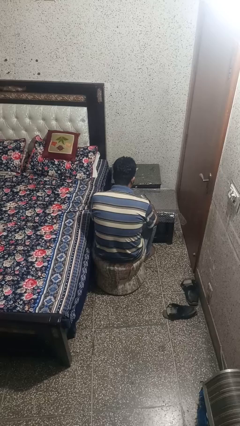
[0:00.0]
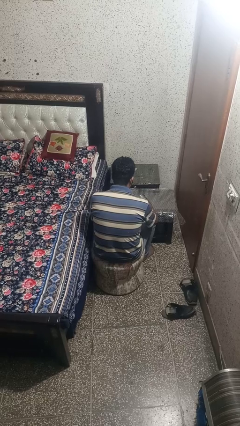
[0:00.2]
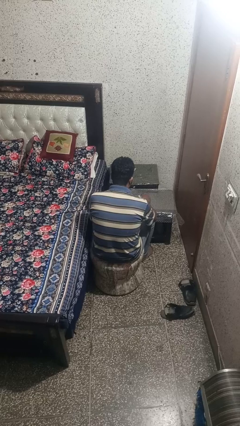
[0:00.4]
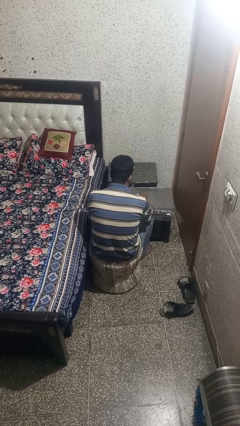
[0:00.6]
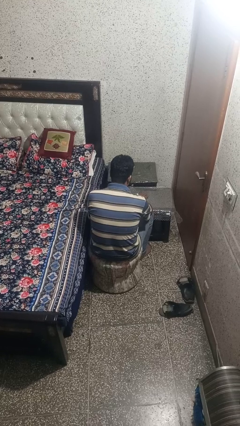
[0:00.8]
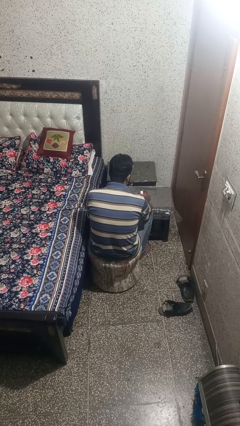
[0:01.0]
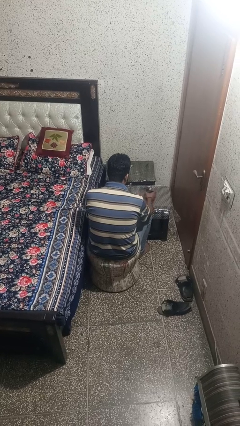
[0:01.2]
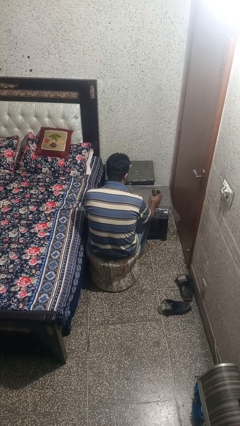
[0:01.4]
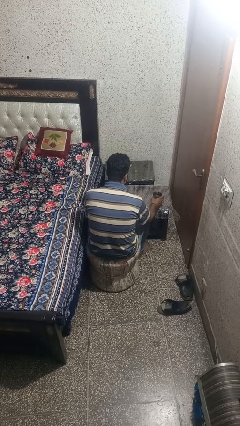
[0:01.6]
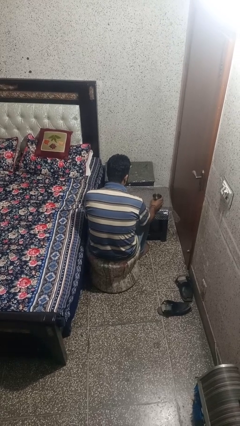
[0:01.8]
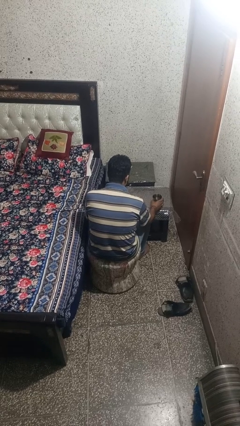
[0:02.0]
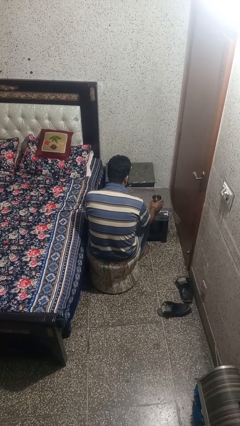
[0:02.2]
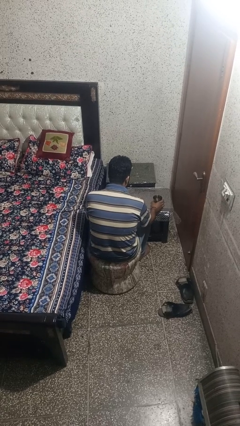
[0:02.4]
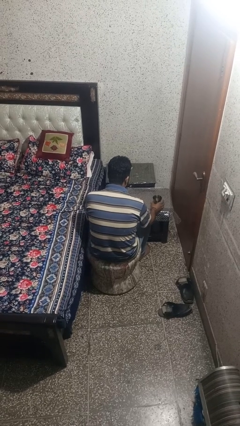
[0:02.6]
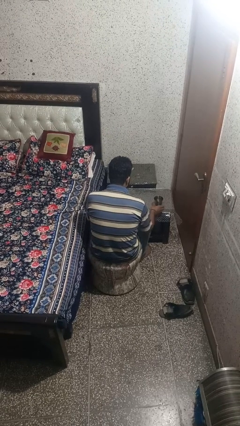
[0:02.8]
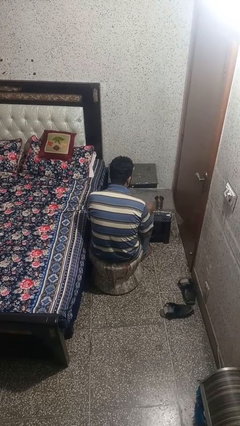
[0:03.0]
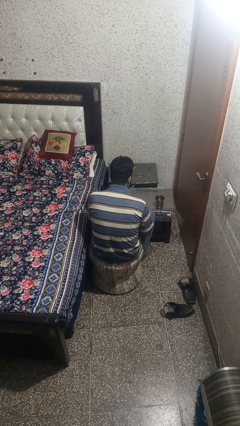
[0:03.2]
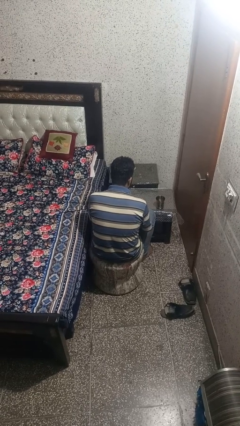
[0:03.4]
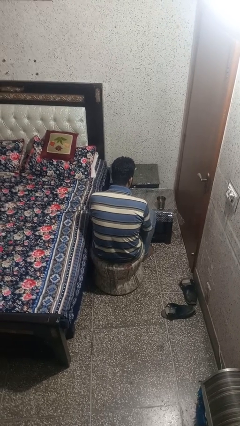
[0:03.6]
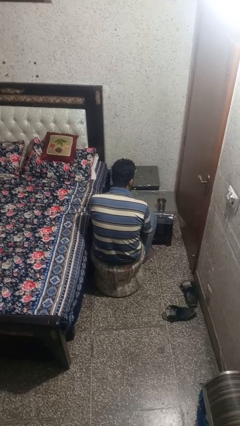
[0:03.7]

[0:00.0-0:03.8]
person sets upright glass

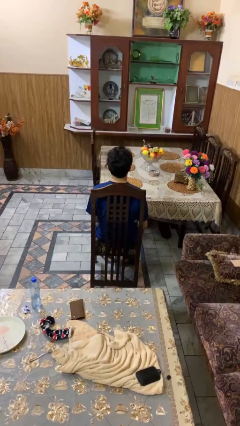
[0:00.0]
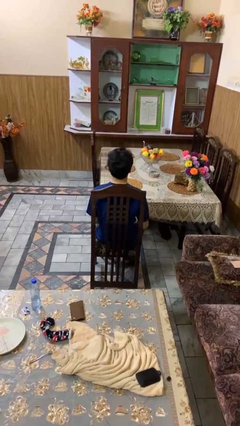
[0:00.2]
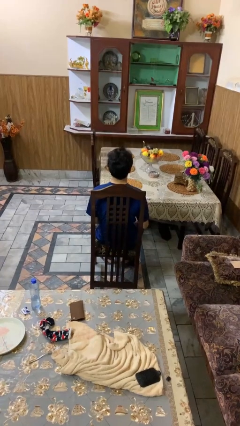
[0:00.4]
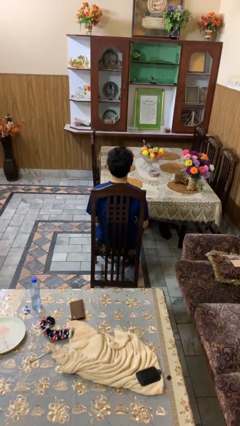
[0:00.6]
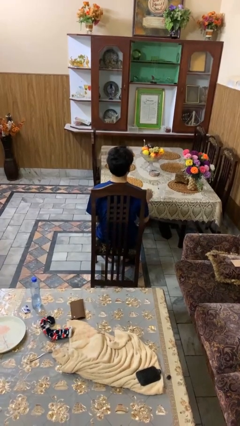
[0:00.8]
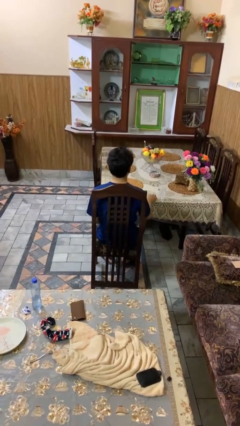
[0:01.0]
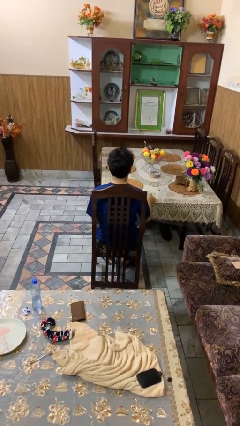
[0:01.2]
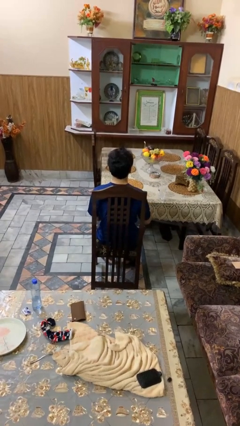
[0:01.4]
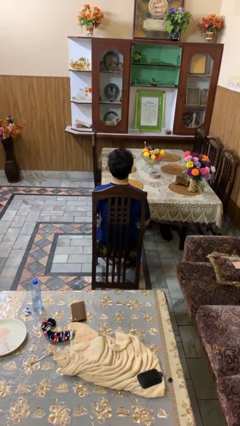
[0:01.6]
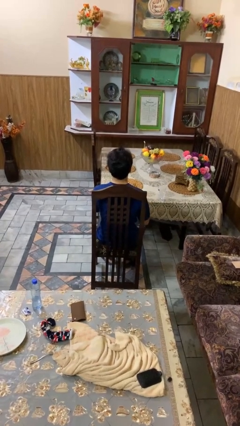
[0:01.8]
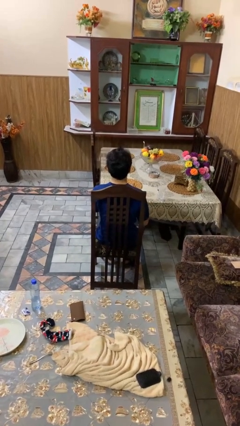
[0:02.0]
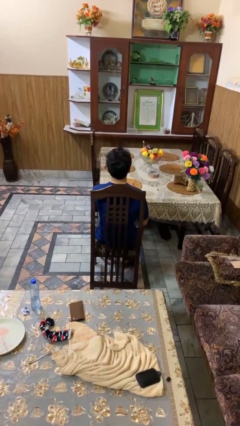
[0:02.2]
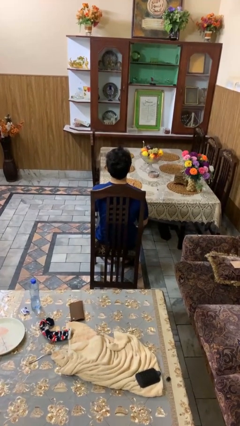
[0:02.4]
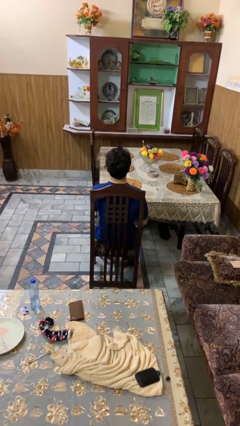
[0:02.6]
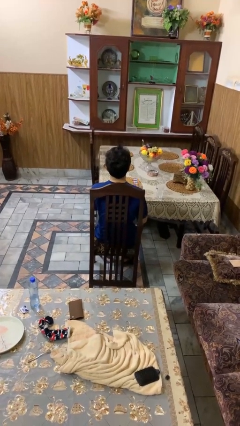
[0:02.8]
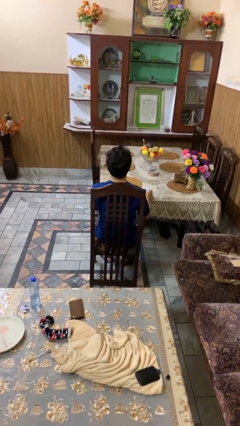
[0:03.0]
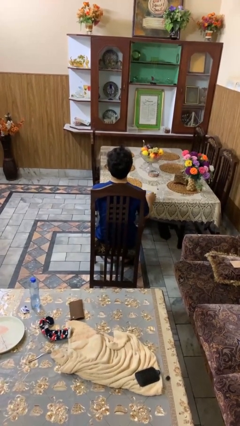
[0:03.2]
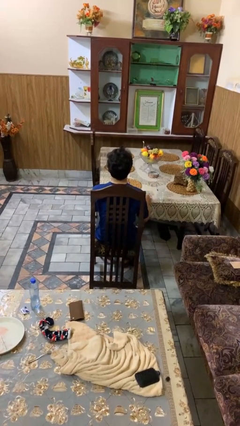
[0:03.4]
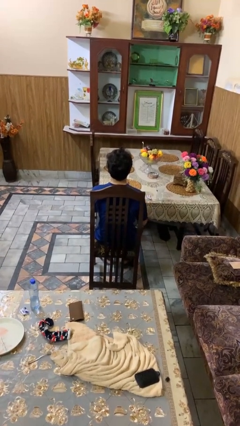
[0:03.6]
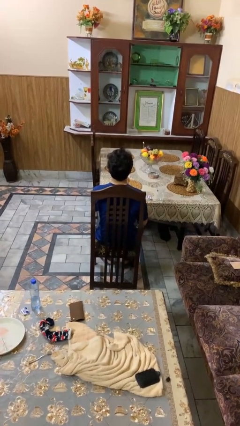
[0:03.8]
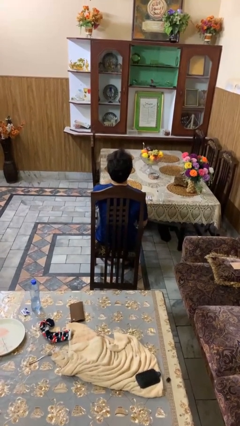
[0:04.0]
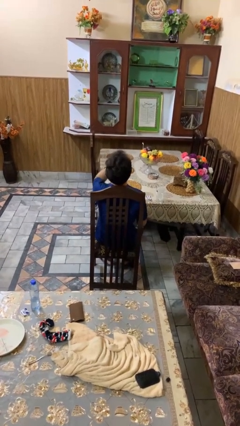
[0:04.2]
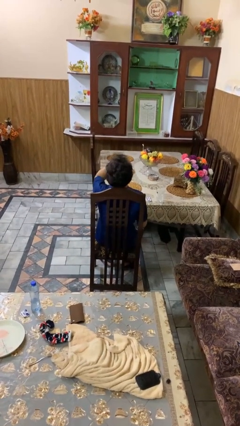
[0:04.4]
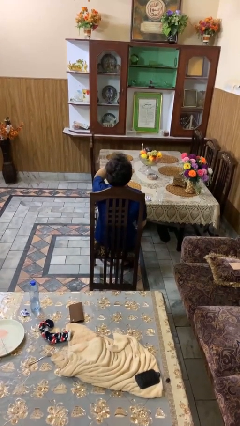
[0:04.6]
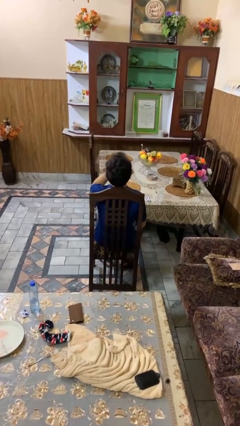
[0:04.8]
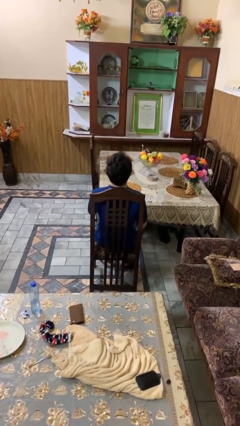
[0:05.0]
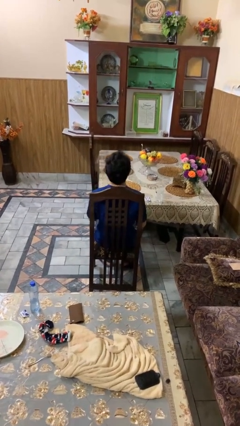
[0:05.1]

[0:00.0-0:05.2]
person takes medicine pills

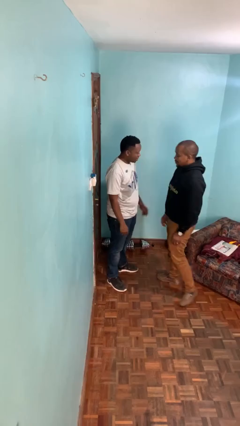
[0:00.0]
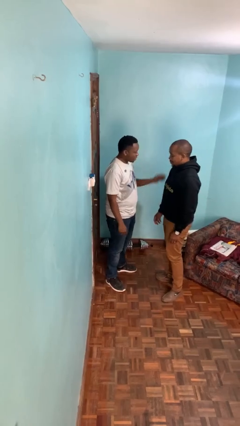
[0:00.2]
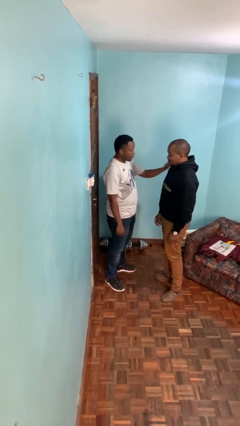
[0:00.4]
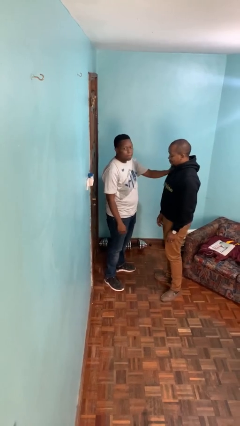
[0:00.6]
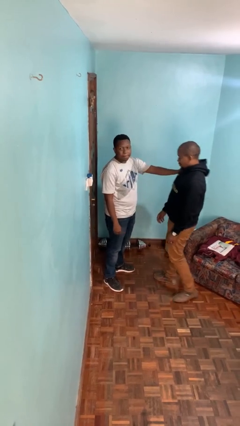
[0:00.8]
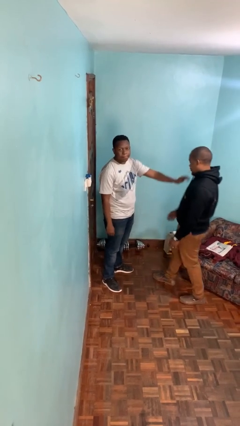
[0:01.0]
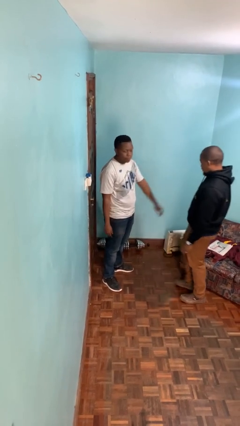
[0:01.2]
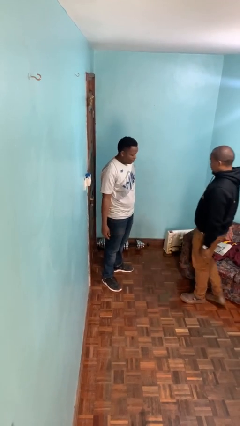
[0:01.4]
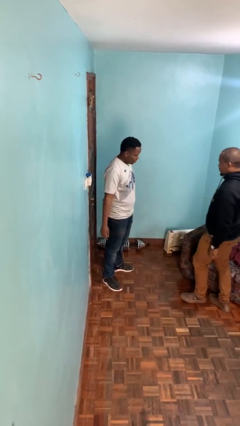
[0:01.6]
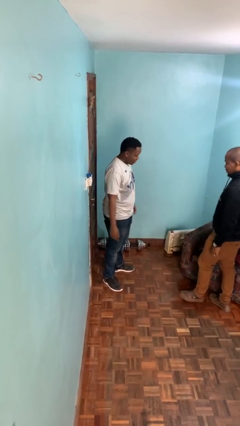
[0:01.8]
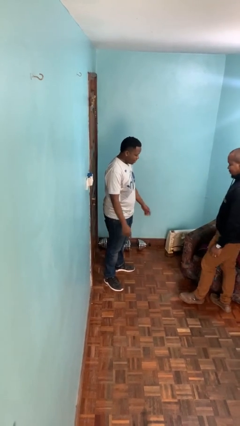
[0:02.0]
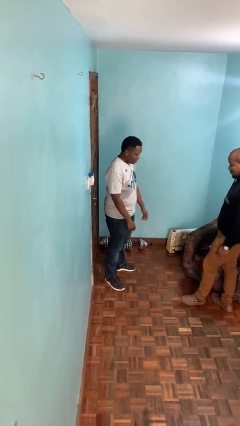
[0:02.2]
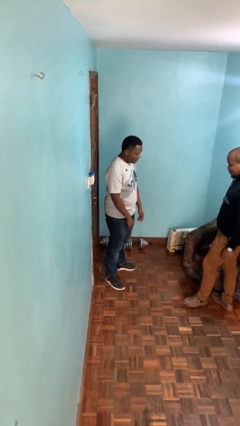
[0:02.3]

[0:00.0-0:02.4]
person shoves person

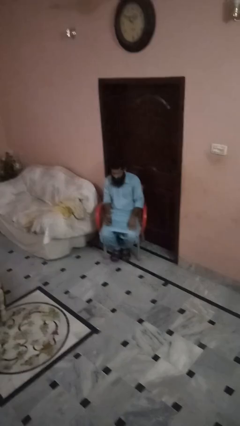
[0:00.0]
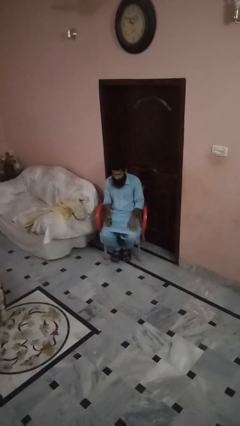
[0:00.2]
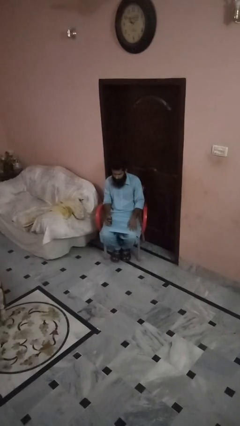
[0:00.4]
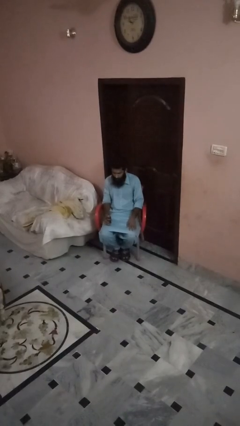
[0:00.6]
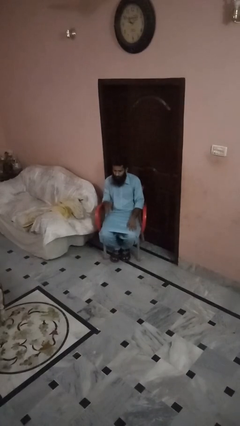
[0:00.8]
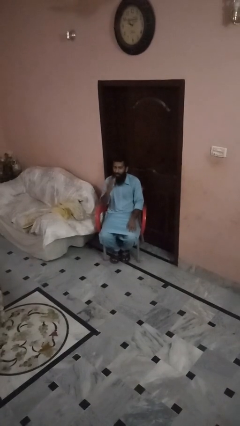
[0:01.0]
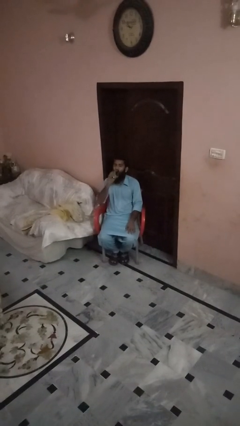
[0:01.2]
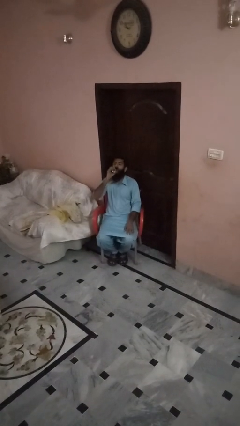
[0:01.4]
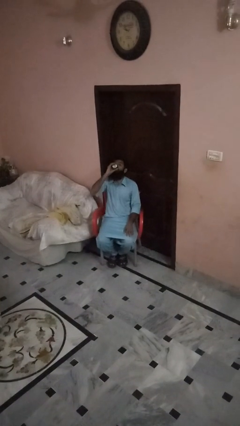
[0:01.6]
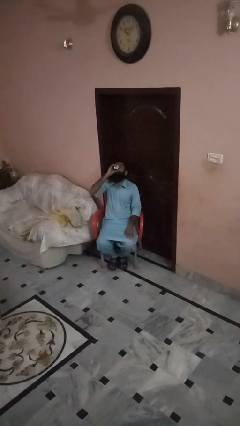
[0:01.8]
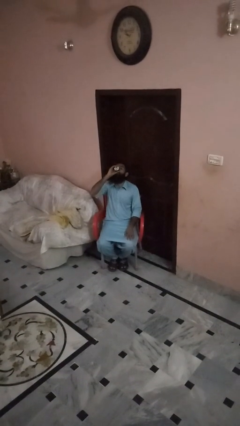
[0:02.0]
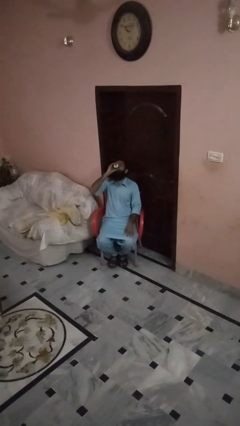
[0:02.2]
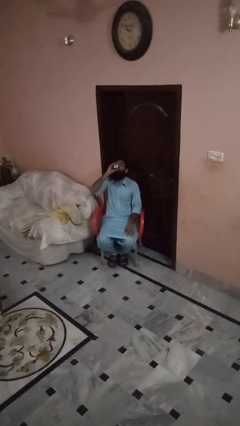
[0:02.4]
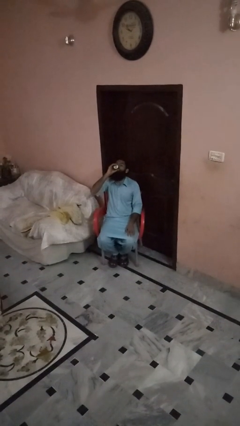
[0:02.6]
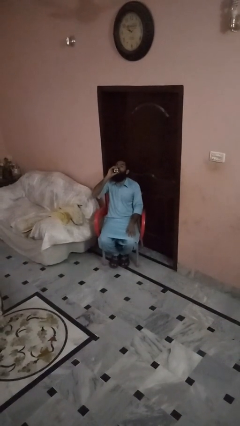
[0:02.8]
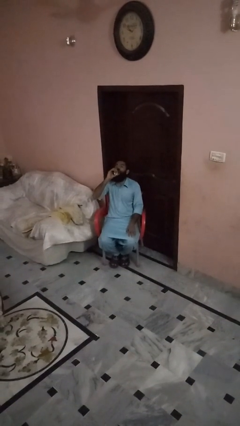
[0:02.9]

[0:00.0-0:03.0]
person drinks from beverage can

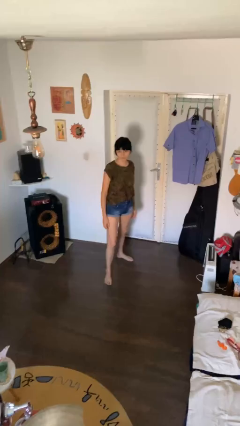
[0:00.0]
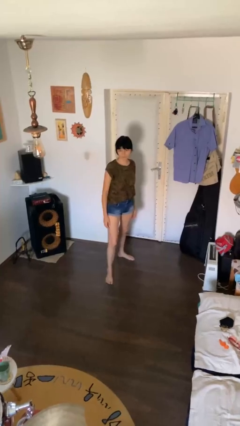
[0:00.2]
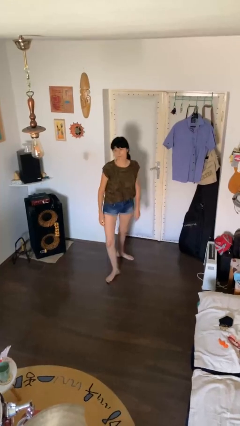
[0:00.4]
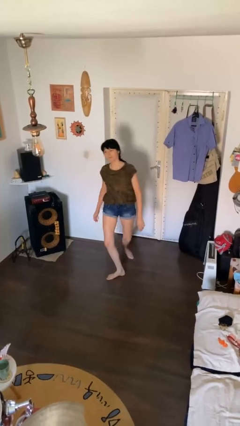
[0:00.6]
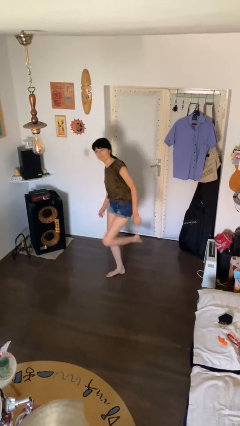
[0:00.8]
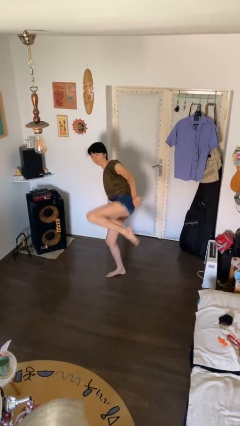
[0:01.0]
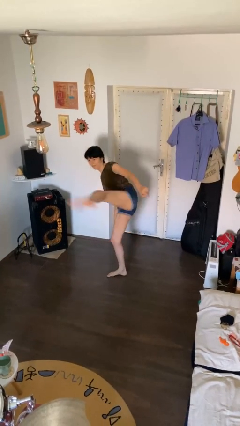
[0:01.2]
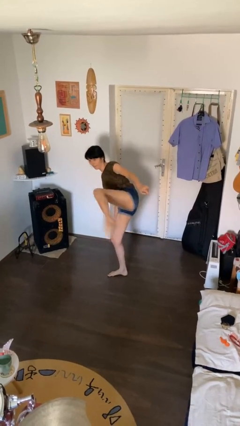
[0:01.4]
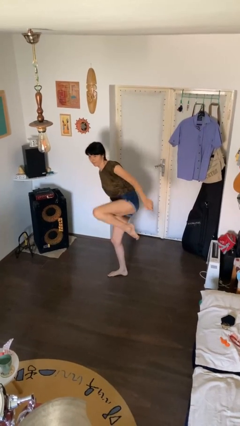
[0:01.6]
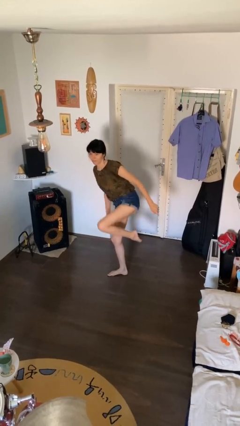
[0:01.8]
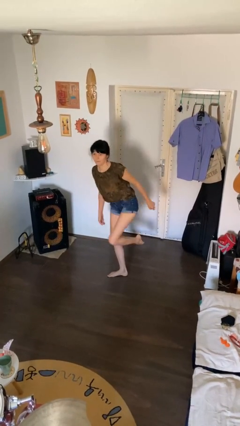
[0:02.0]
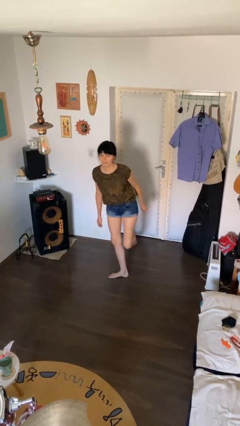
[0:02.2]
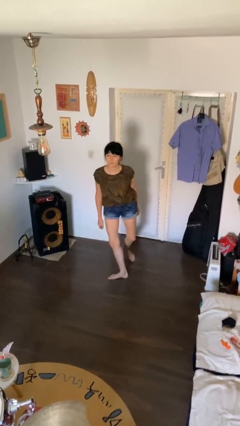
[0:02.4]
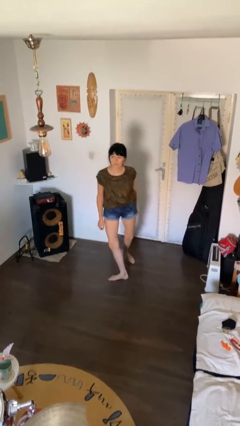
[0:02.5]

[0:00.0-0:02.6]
person karate kicks
